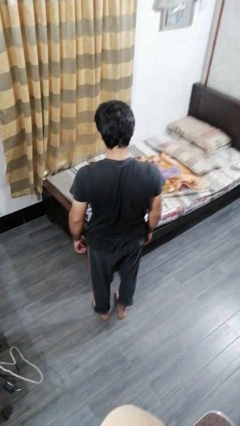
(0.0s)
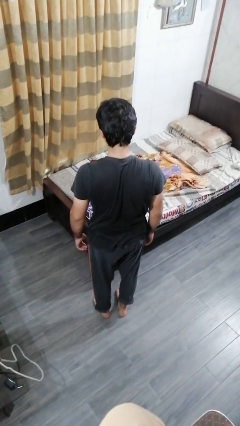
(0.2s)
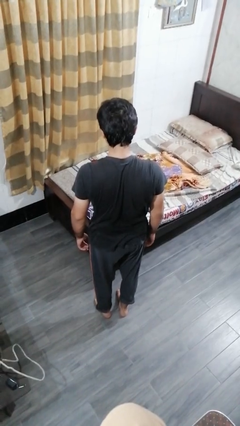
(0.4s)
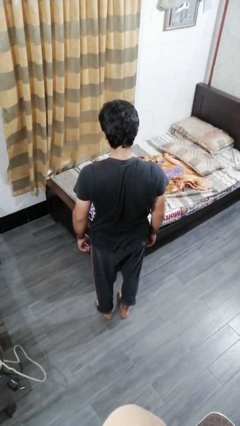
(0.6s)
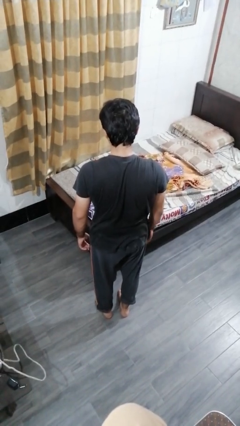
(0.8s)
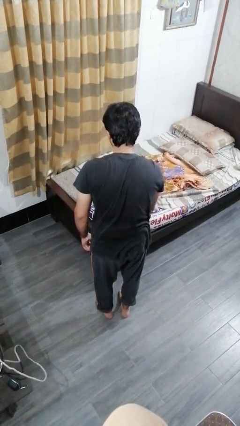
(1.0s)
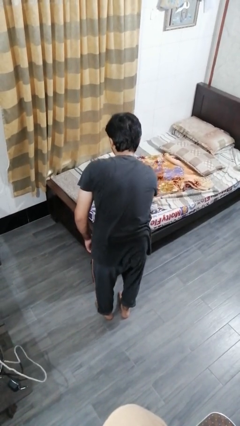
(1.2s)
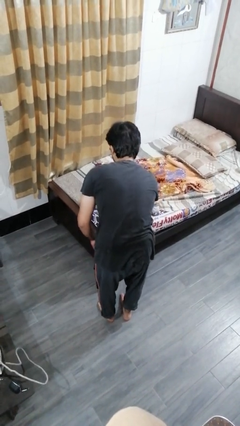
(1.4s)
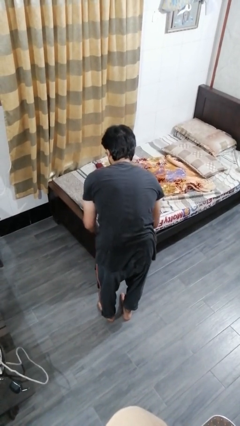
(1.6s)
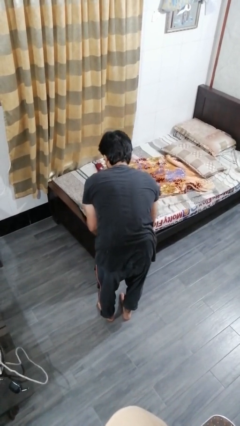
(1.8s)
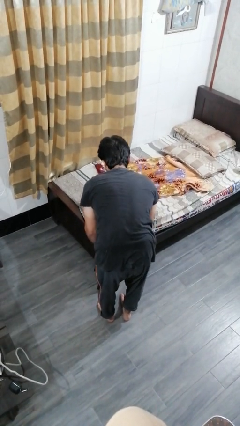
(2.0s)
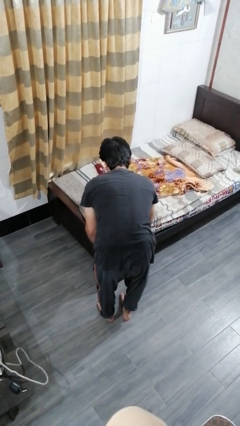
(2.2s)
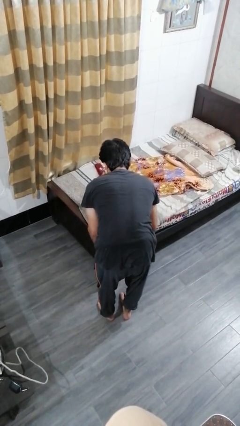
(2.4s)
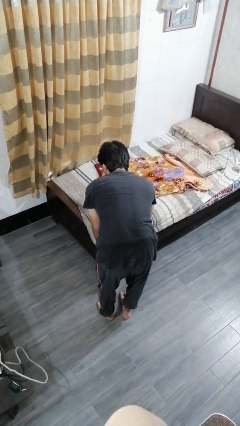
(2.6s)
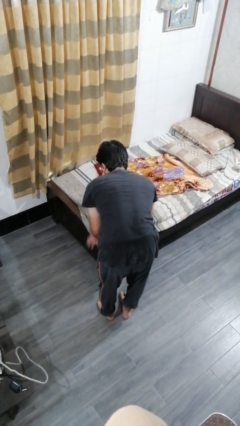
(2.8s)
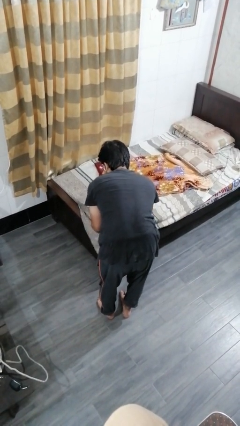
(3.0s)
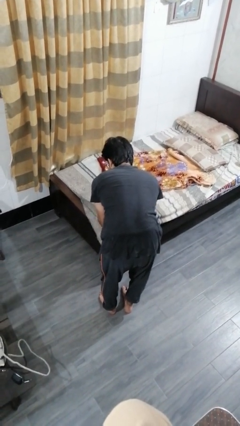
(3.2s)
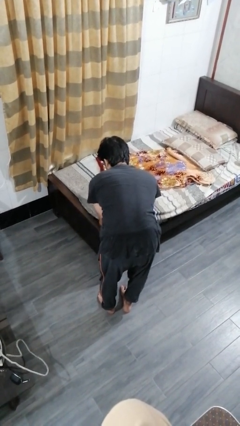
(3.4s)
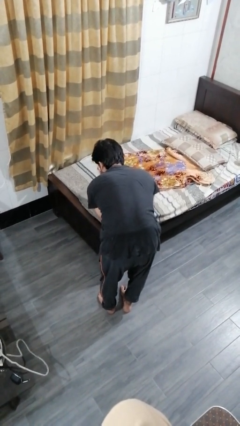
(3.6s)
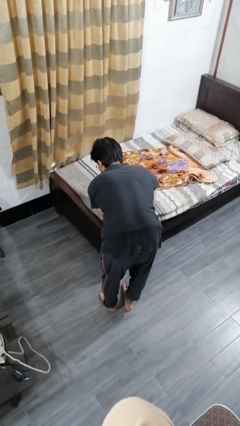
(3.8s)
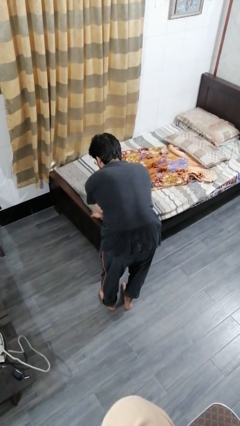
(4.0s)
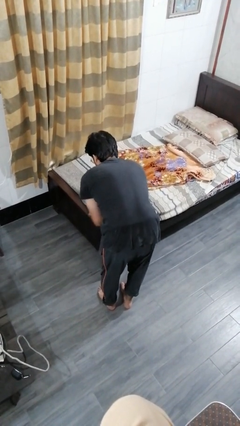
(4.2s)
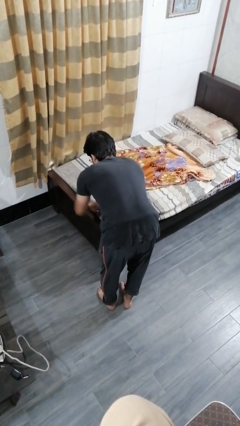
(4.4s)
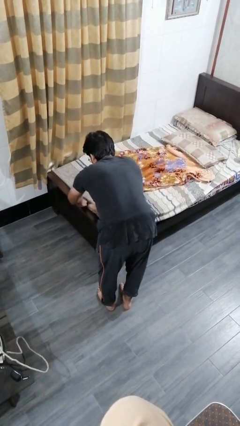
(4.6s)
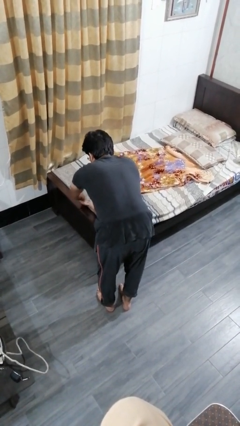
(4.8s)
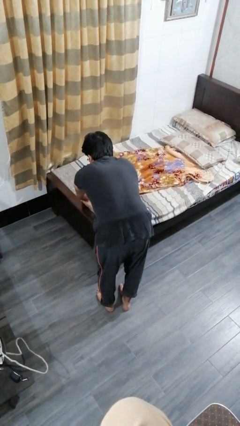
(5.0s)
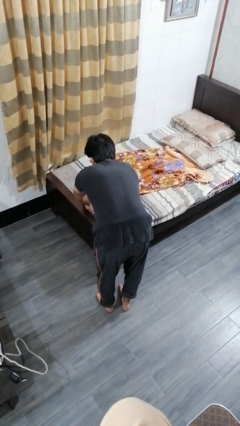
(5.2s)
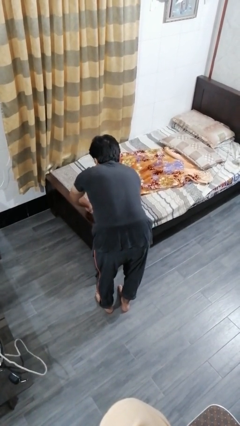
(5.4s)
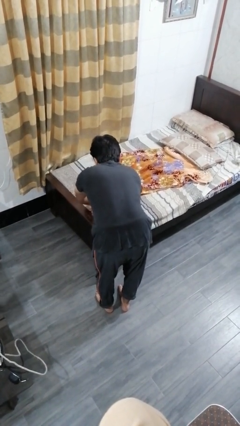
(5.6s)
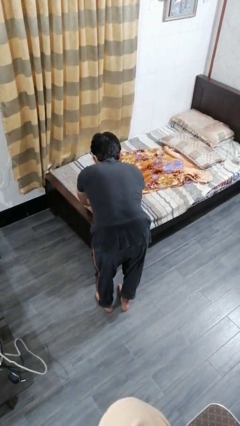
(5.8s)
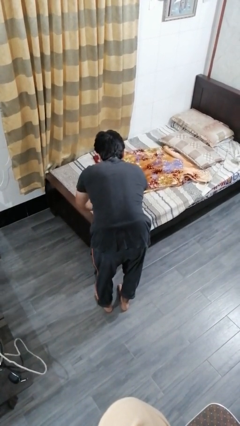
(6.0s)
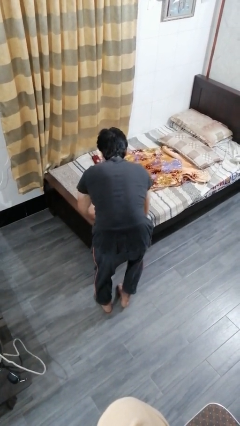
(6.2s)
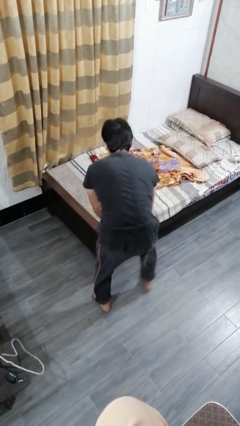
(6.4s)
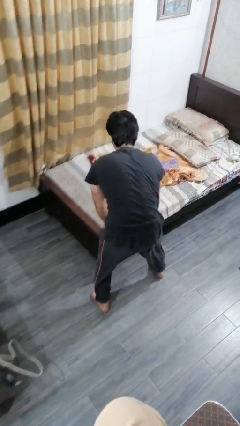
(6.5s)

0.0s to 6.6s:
person makes bed

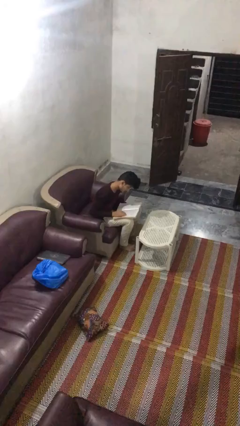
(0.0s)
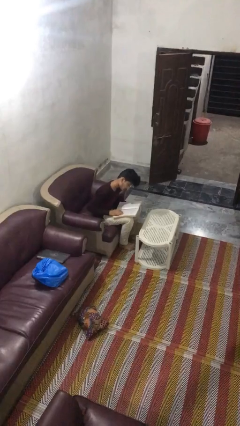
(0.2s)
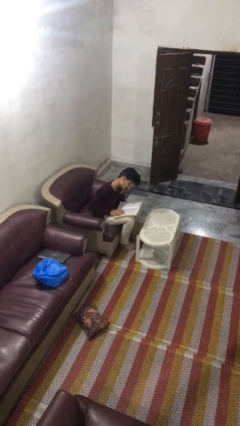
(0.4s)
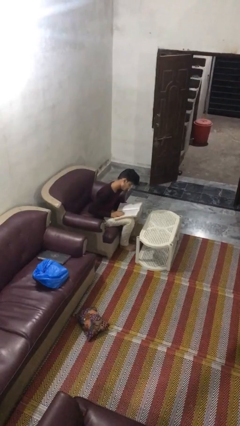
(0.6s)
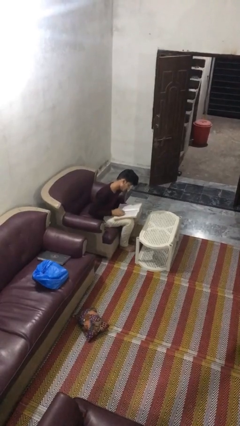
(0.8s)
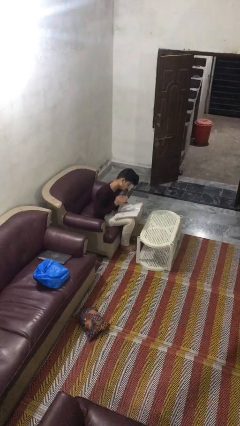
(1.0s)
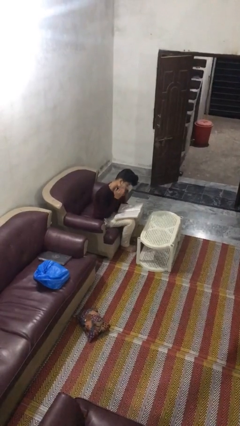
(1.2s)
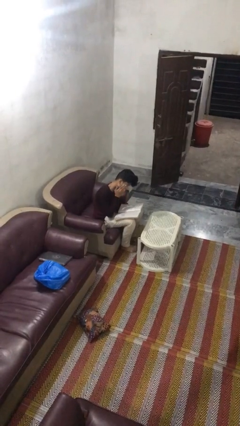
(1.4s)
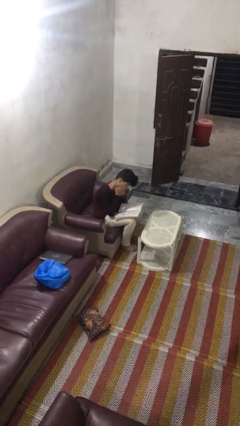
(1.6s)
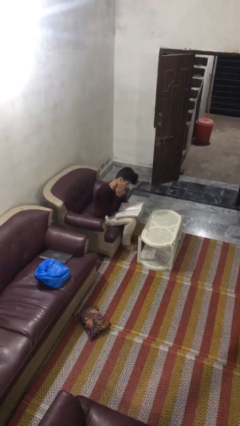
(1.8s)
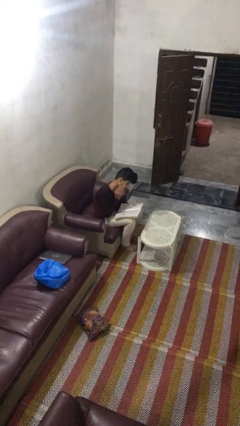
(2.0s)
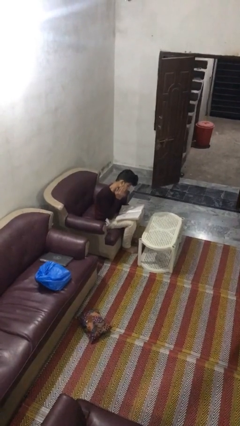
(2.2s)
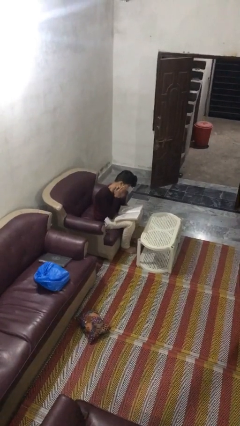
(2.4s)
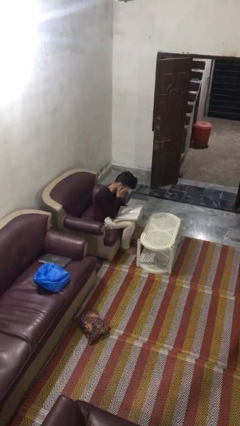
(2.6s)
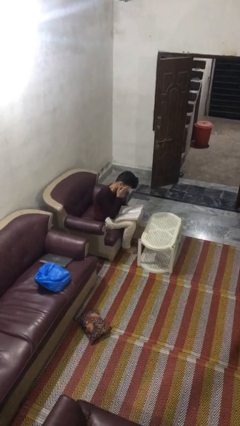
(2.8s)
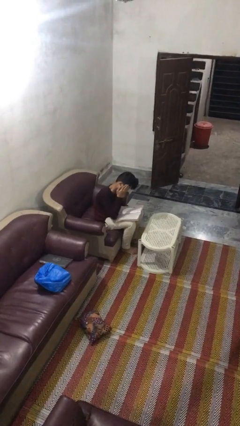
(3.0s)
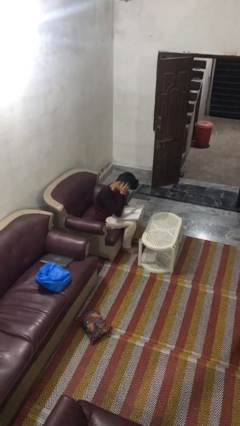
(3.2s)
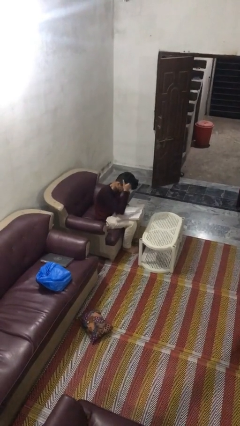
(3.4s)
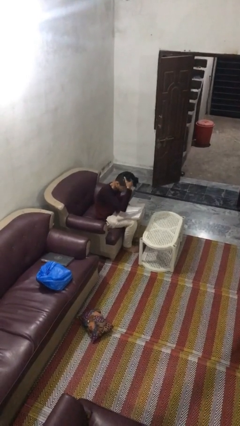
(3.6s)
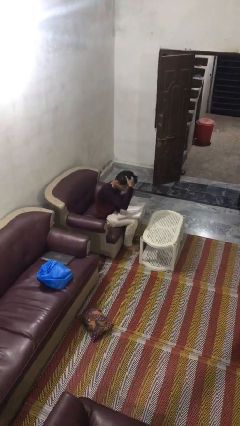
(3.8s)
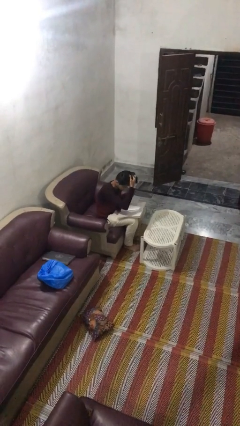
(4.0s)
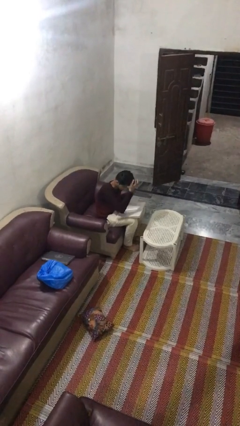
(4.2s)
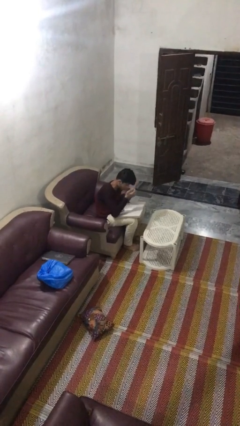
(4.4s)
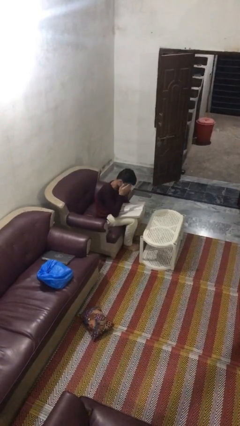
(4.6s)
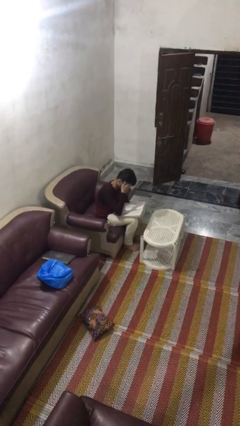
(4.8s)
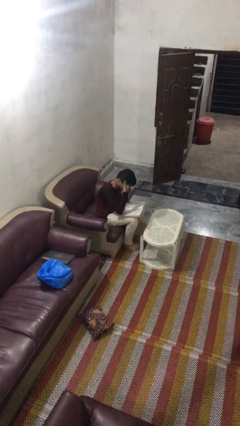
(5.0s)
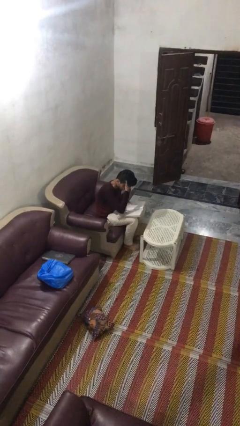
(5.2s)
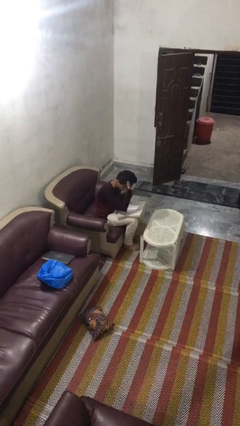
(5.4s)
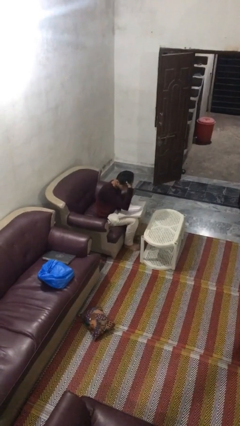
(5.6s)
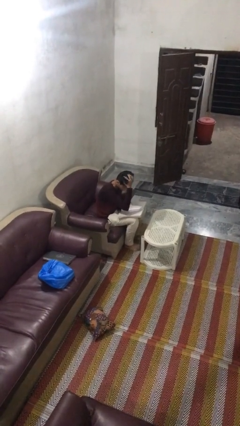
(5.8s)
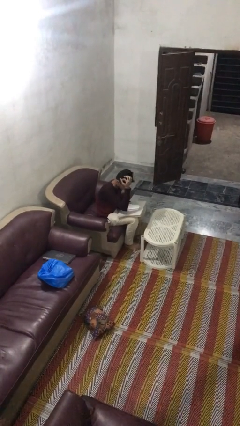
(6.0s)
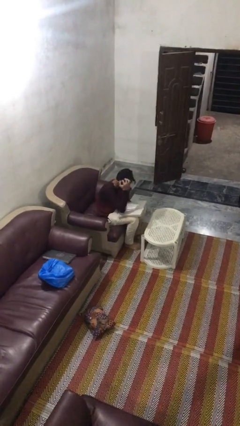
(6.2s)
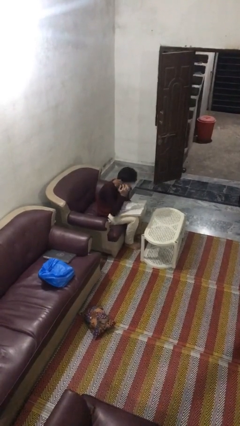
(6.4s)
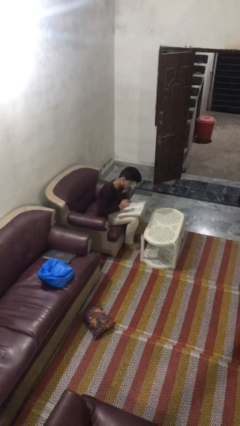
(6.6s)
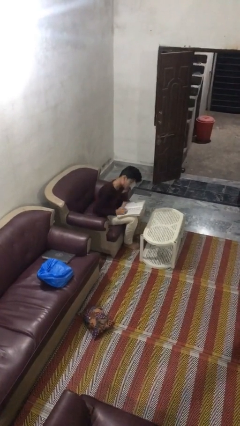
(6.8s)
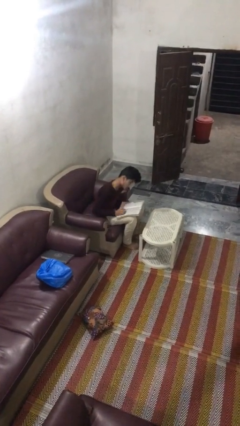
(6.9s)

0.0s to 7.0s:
person reads document

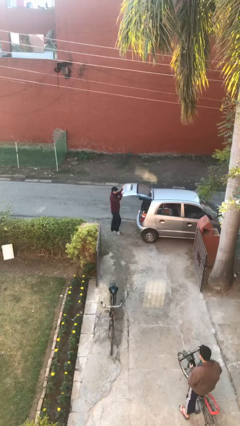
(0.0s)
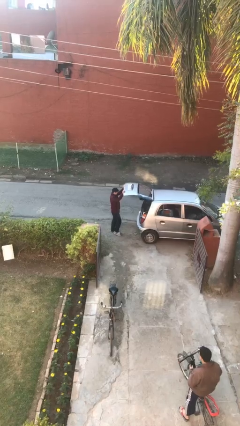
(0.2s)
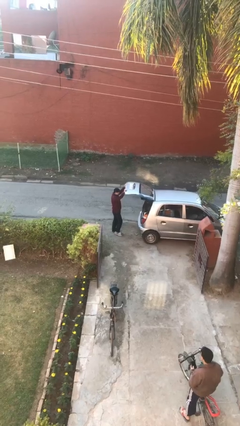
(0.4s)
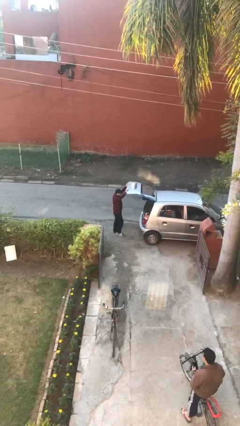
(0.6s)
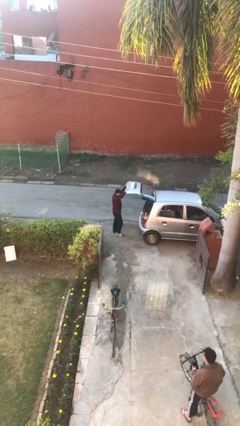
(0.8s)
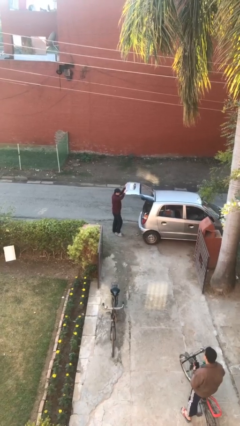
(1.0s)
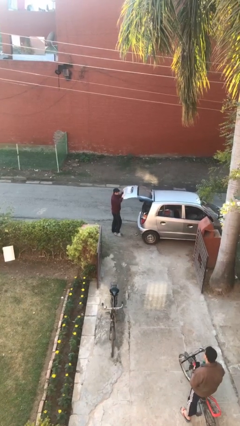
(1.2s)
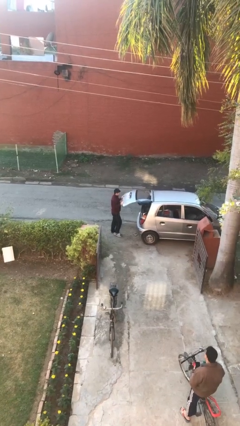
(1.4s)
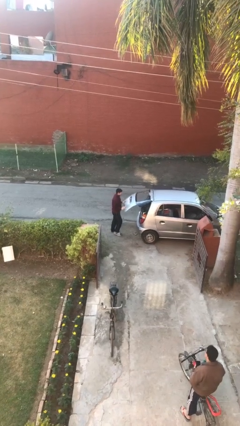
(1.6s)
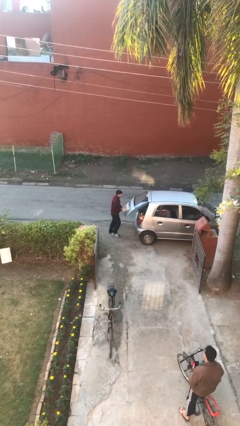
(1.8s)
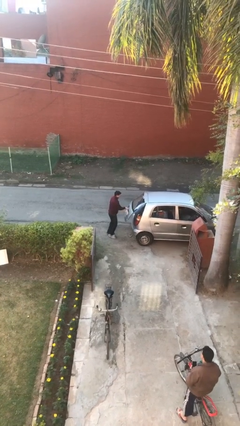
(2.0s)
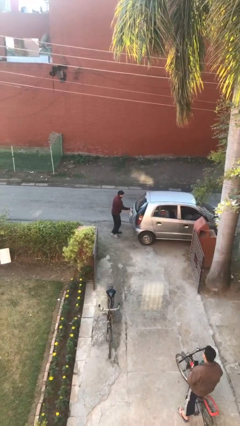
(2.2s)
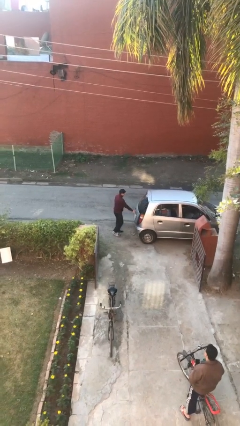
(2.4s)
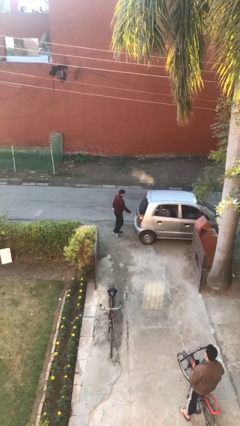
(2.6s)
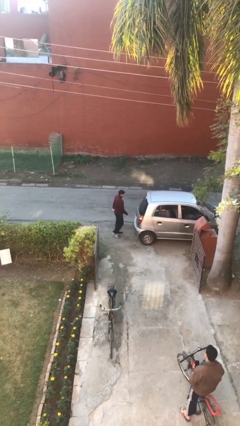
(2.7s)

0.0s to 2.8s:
person closes car trunk

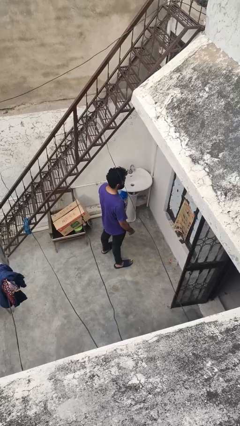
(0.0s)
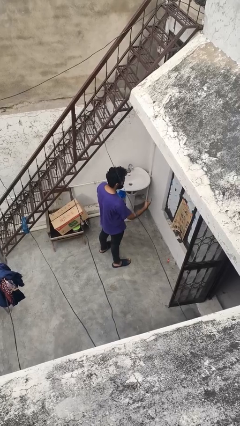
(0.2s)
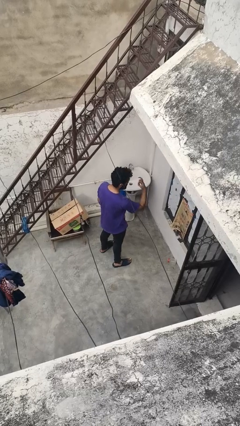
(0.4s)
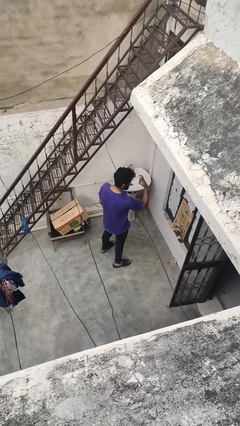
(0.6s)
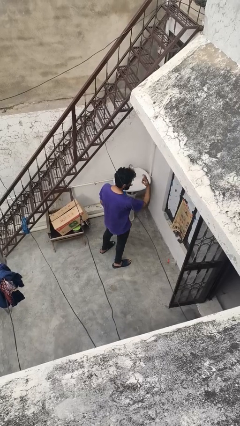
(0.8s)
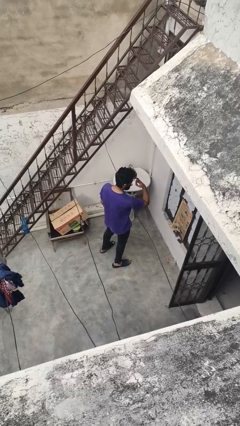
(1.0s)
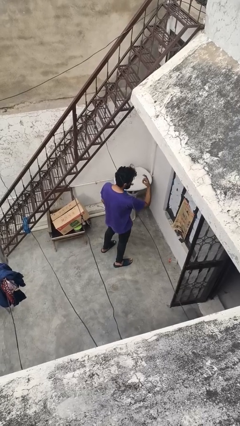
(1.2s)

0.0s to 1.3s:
person gestures watch closely

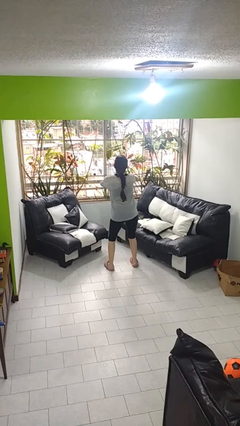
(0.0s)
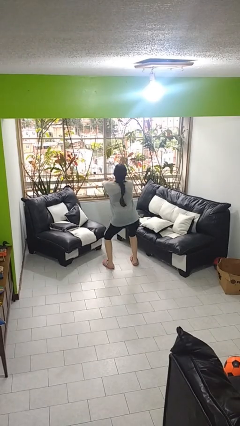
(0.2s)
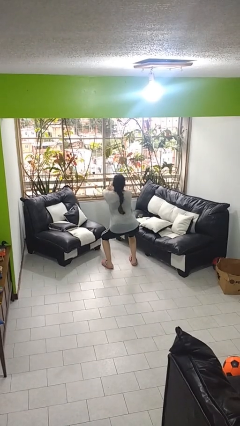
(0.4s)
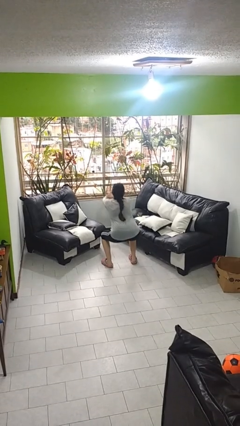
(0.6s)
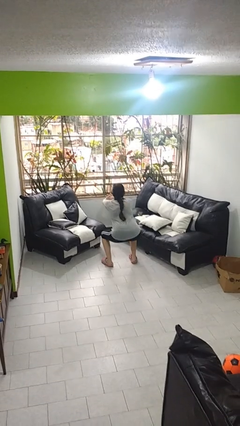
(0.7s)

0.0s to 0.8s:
person squats
